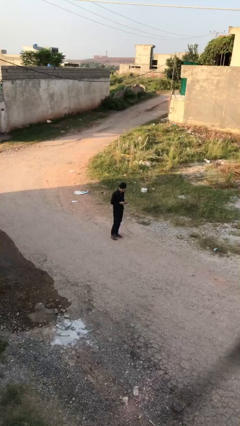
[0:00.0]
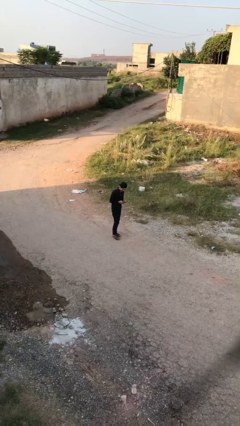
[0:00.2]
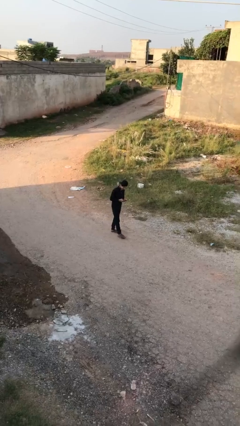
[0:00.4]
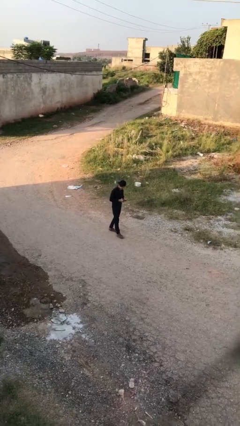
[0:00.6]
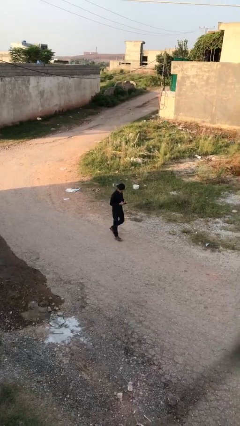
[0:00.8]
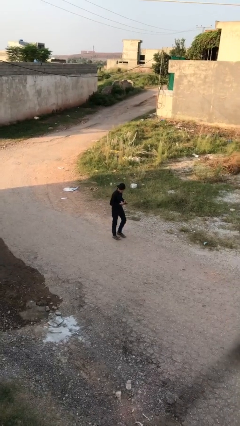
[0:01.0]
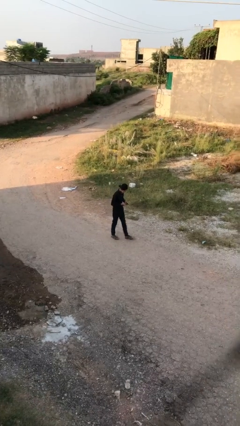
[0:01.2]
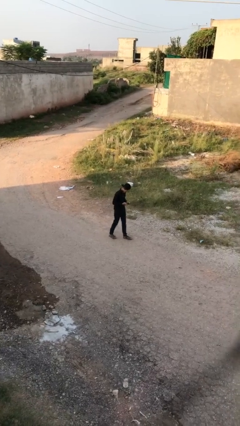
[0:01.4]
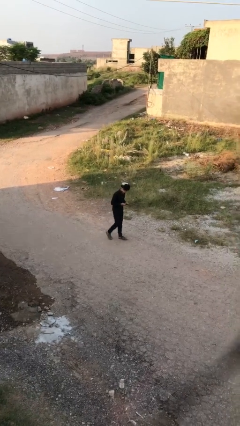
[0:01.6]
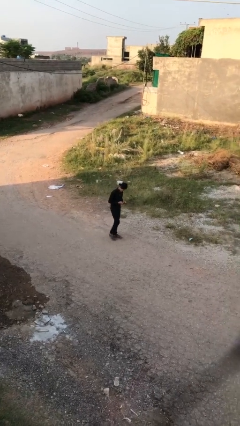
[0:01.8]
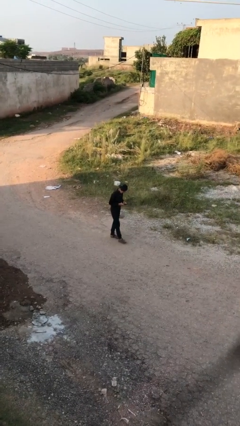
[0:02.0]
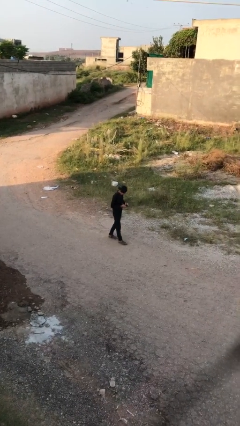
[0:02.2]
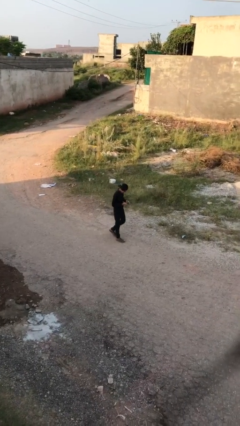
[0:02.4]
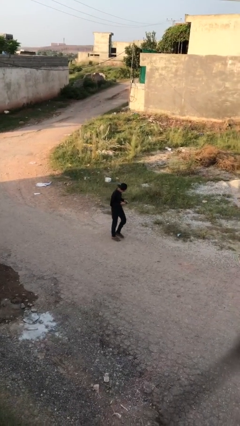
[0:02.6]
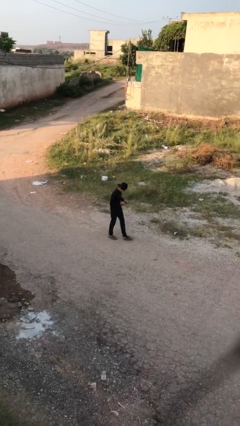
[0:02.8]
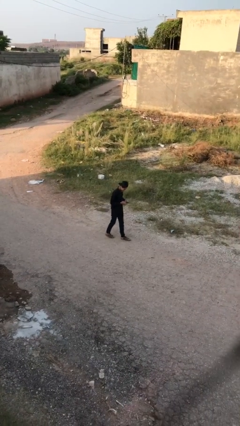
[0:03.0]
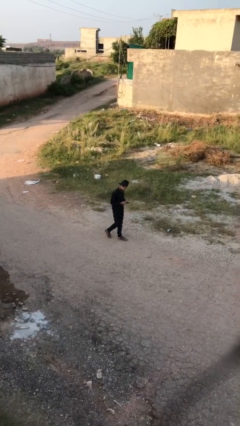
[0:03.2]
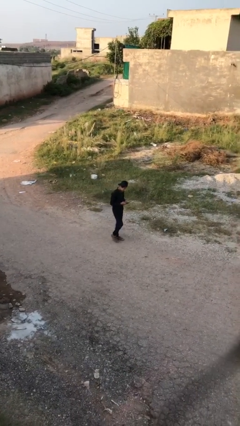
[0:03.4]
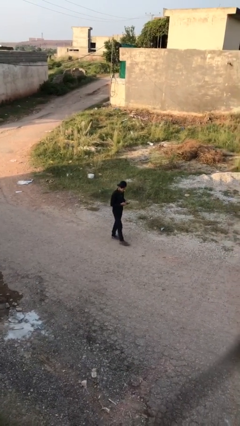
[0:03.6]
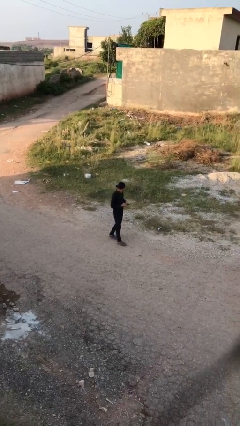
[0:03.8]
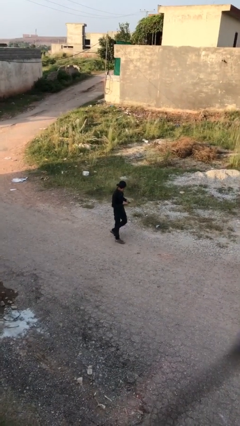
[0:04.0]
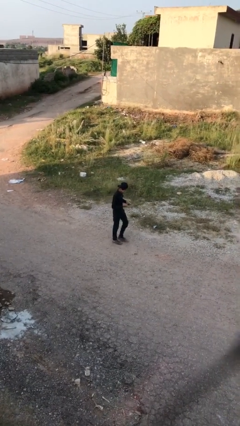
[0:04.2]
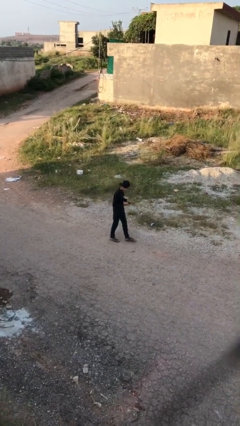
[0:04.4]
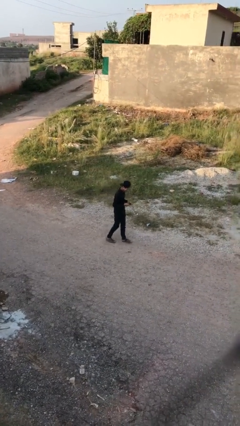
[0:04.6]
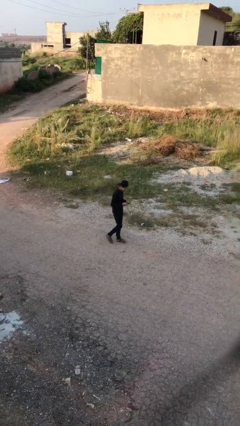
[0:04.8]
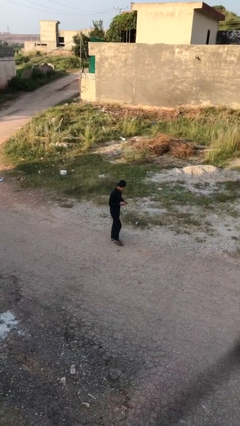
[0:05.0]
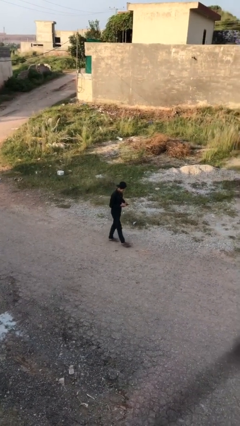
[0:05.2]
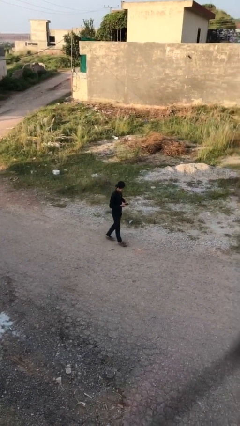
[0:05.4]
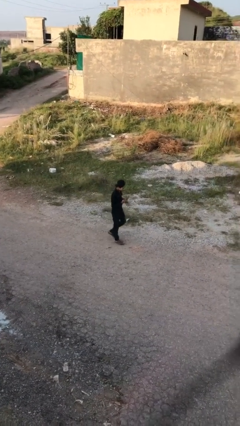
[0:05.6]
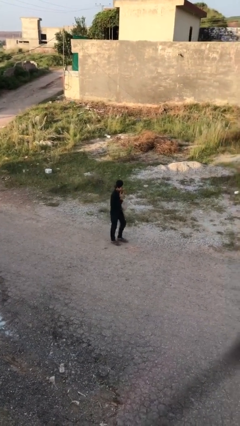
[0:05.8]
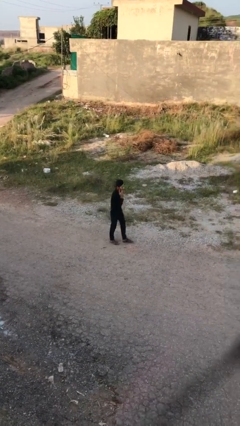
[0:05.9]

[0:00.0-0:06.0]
person texts on phone

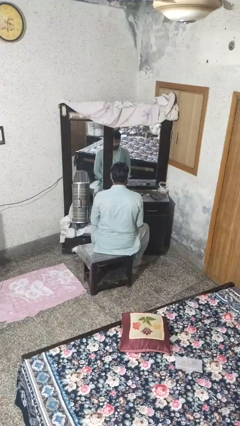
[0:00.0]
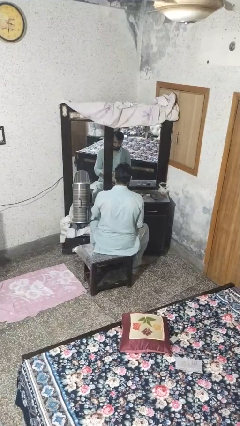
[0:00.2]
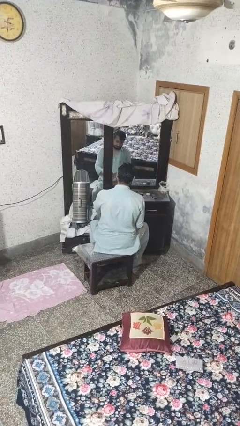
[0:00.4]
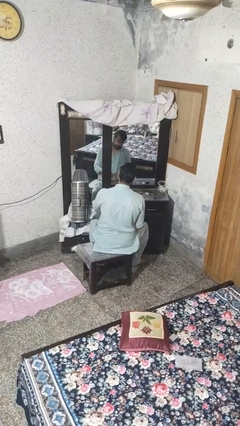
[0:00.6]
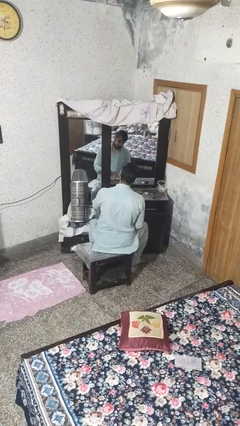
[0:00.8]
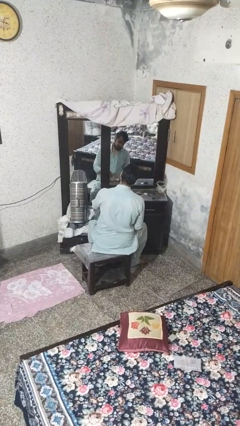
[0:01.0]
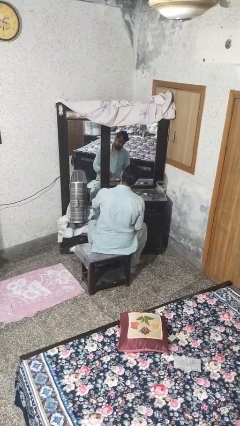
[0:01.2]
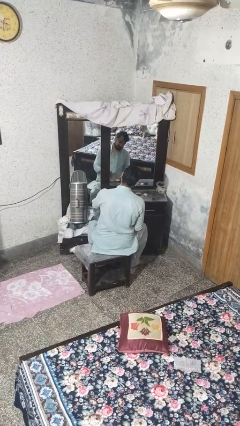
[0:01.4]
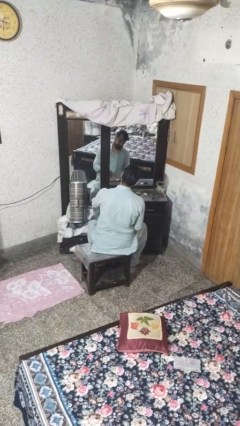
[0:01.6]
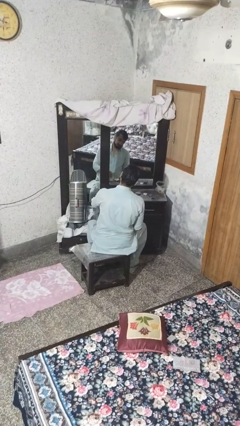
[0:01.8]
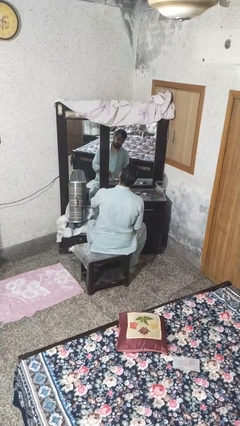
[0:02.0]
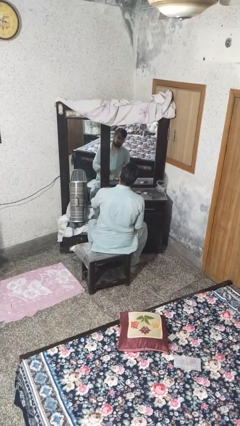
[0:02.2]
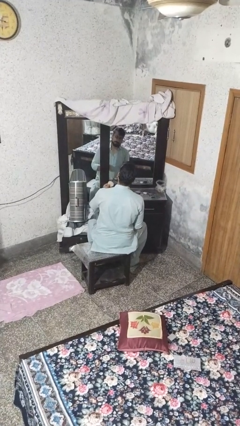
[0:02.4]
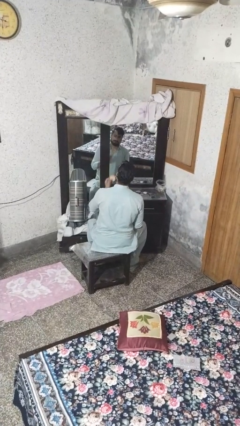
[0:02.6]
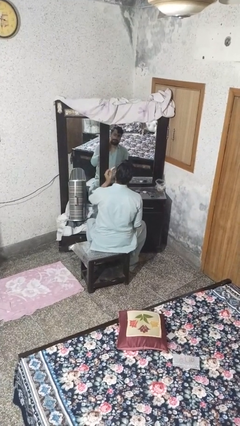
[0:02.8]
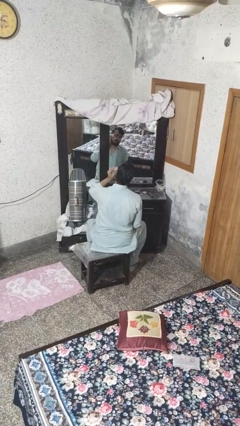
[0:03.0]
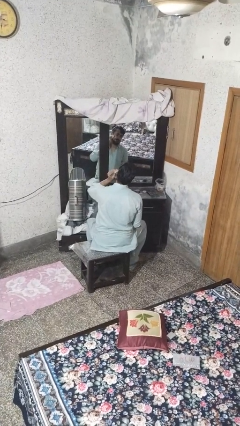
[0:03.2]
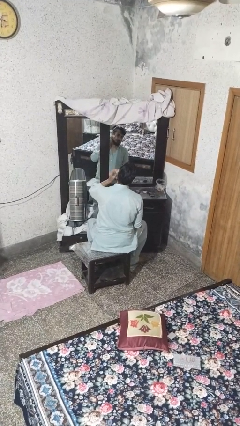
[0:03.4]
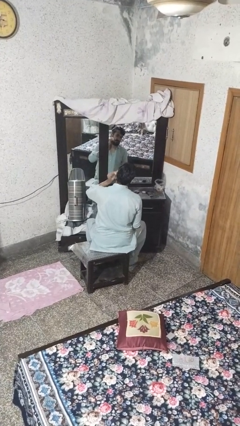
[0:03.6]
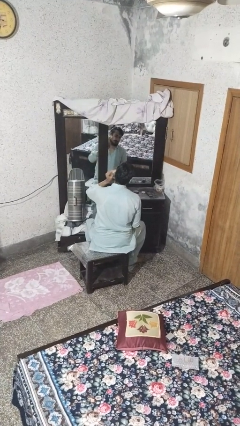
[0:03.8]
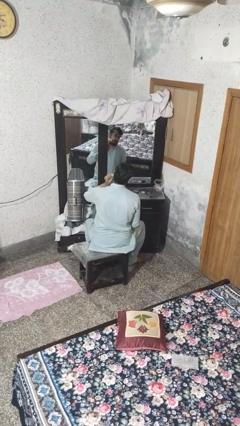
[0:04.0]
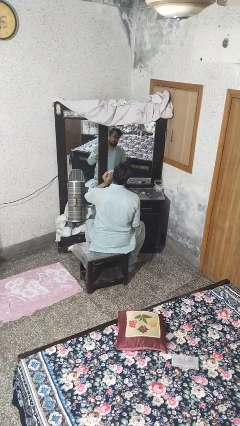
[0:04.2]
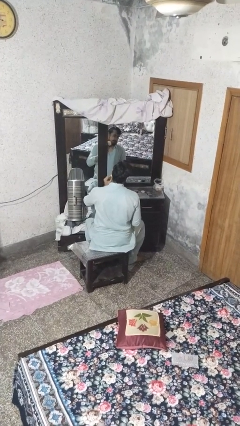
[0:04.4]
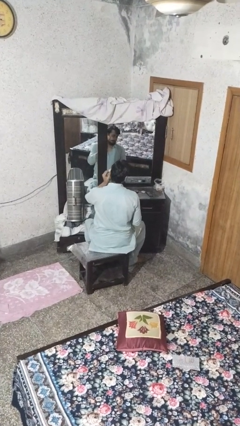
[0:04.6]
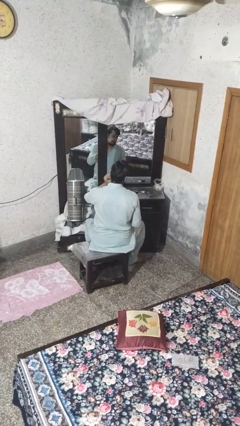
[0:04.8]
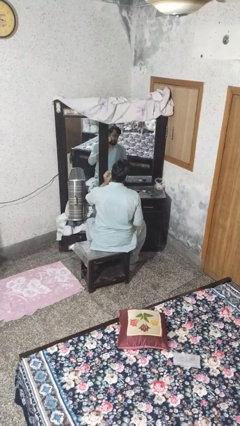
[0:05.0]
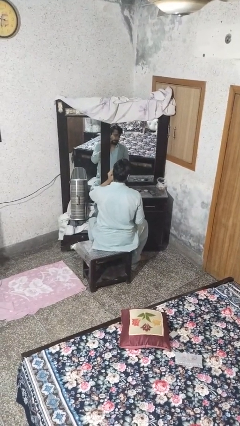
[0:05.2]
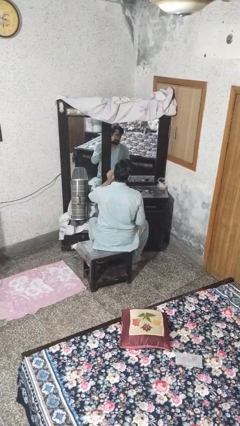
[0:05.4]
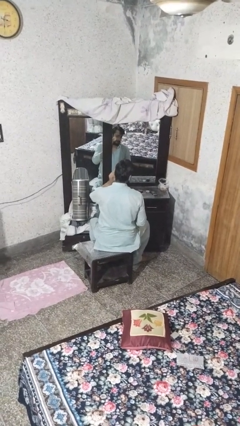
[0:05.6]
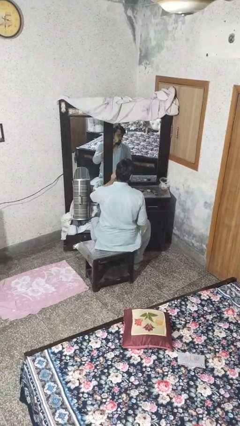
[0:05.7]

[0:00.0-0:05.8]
person applies foundation makeup

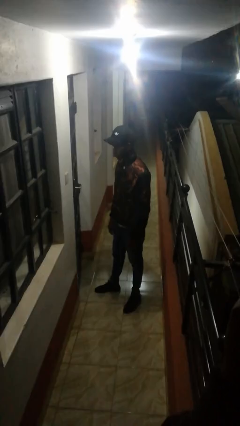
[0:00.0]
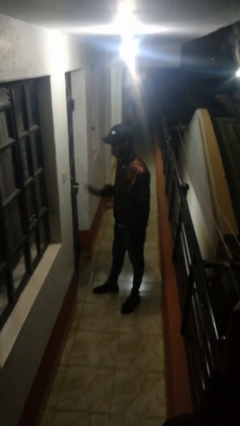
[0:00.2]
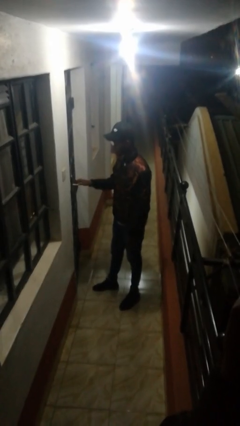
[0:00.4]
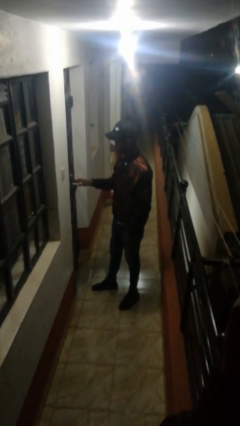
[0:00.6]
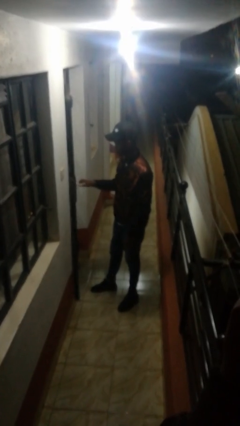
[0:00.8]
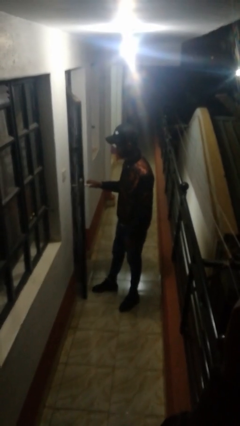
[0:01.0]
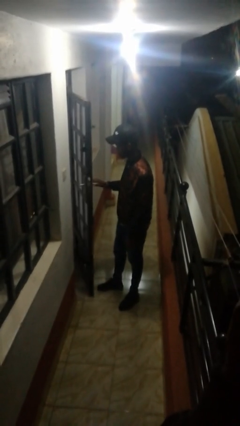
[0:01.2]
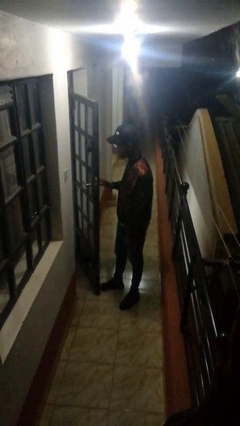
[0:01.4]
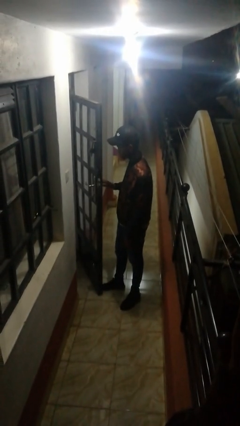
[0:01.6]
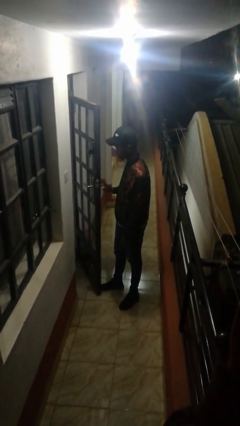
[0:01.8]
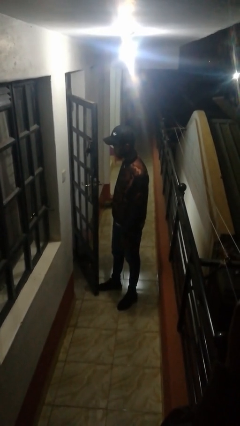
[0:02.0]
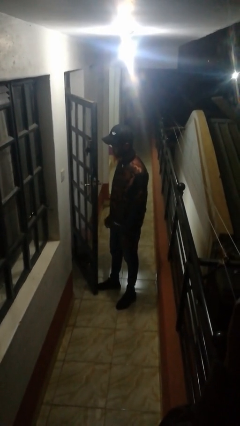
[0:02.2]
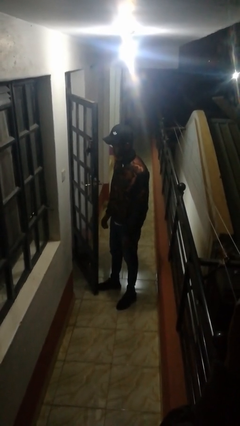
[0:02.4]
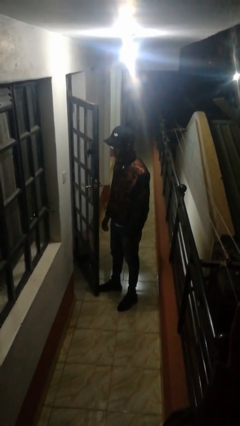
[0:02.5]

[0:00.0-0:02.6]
person opens facility door

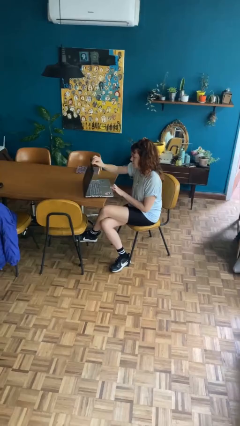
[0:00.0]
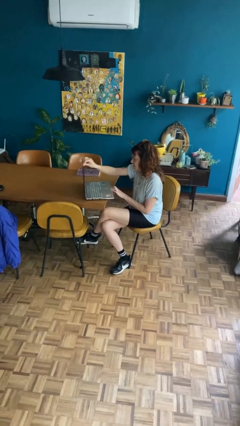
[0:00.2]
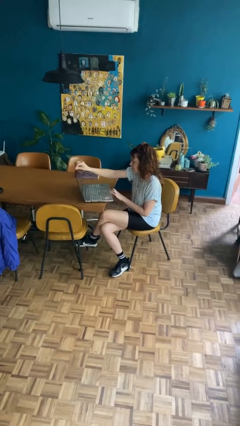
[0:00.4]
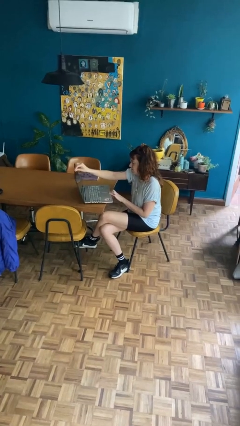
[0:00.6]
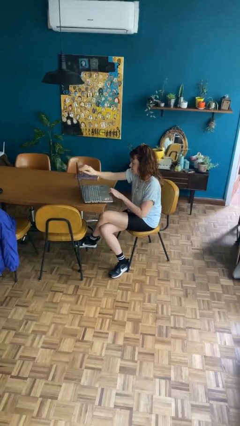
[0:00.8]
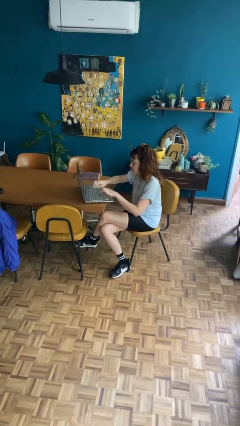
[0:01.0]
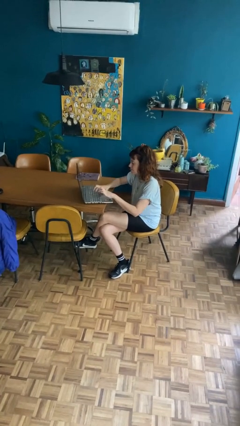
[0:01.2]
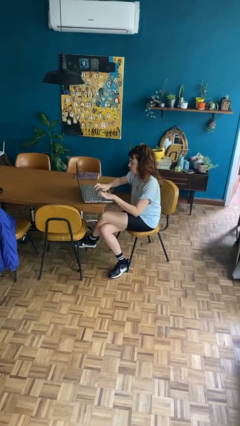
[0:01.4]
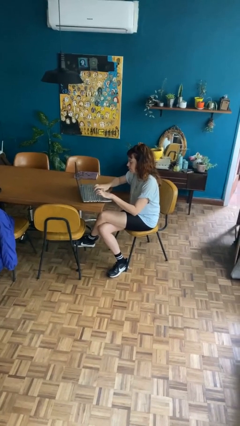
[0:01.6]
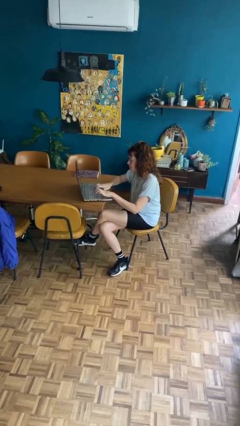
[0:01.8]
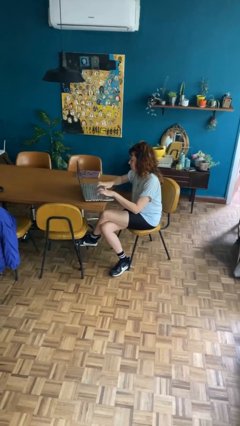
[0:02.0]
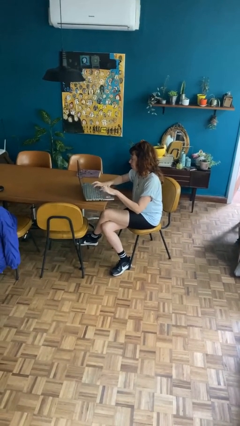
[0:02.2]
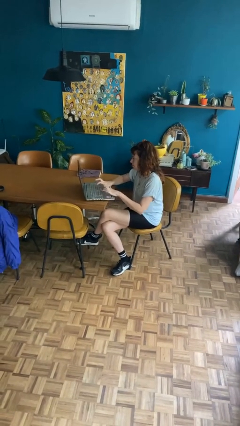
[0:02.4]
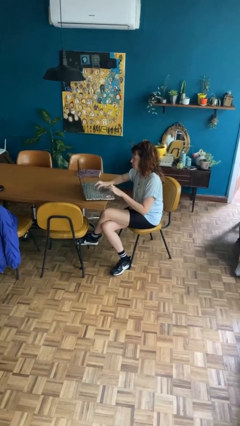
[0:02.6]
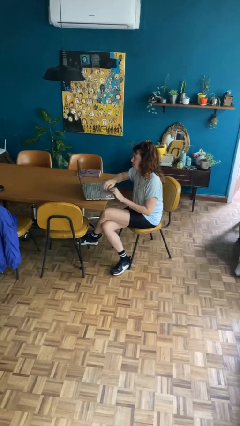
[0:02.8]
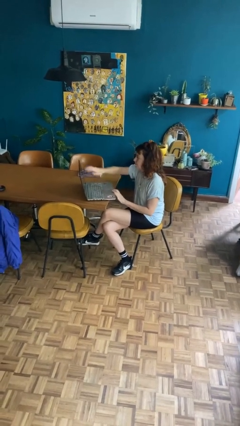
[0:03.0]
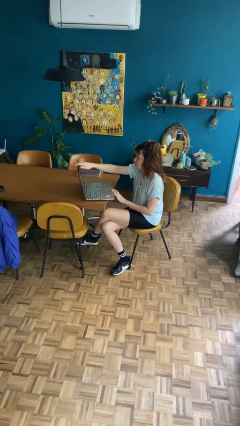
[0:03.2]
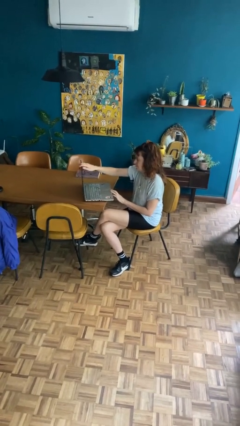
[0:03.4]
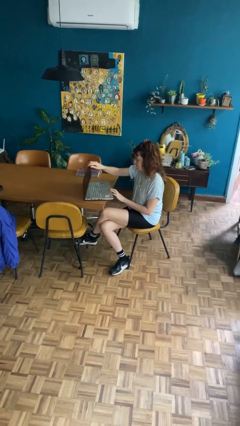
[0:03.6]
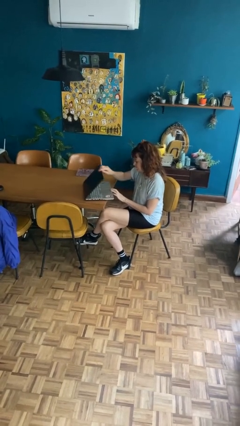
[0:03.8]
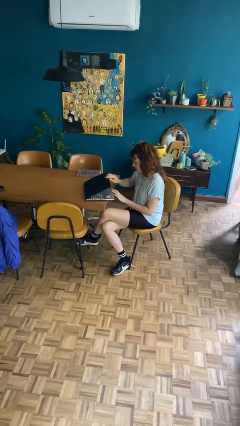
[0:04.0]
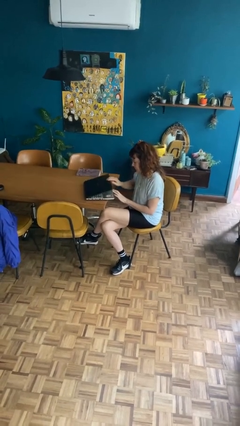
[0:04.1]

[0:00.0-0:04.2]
person interacts with laptop
